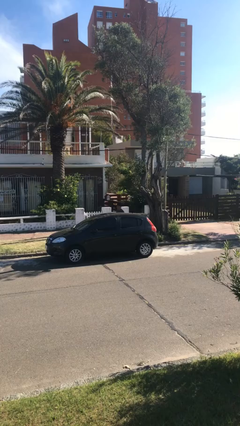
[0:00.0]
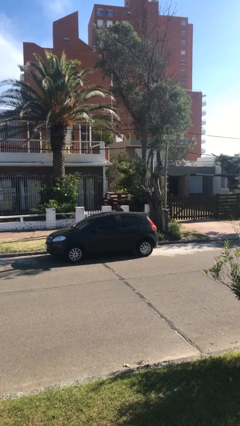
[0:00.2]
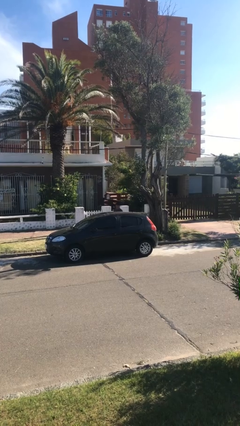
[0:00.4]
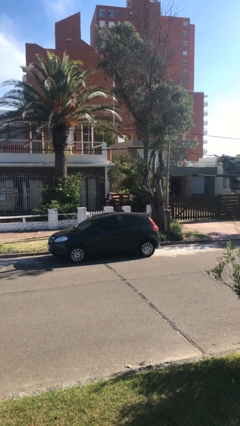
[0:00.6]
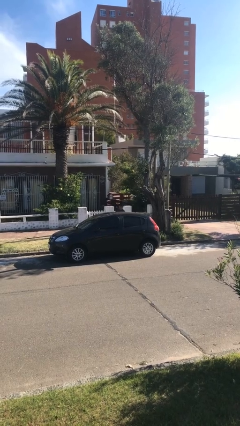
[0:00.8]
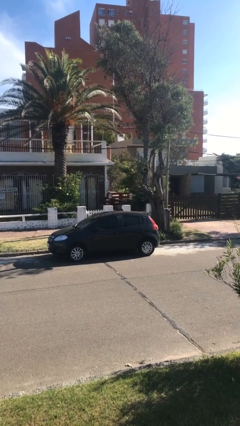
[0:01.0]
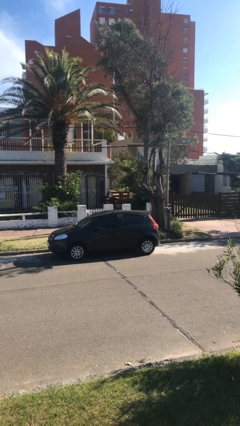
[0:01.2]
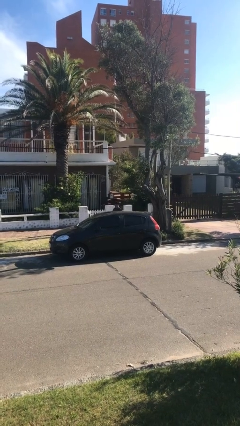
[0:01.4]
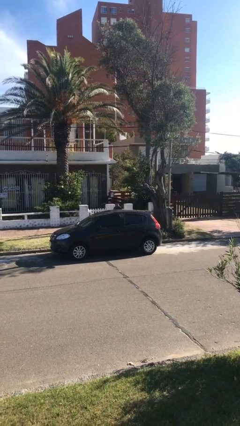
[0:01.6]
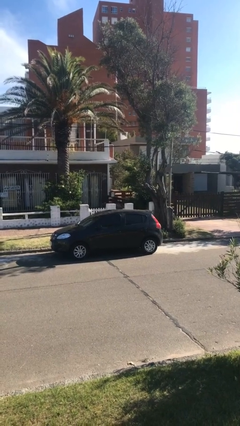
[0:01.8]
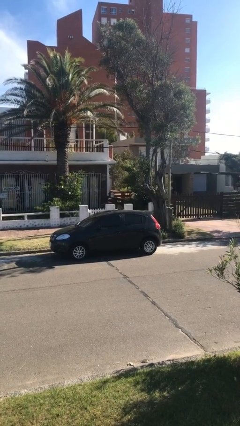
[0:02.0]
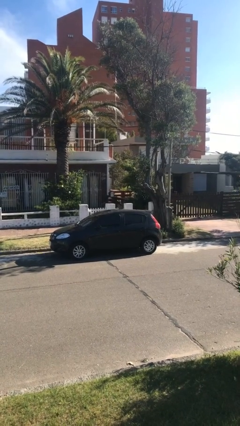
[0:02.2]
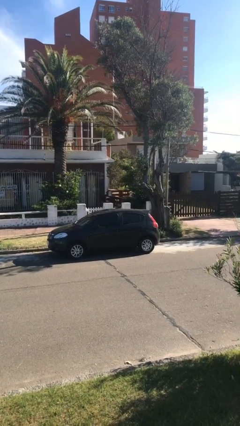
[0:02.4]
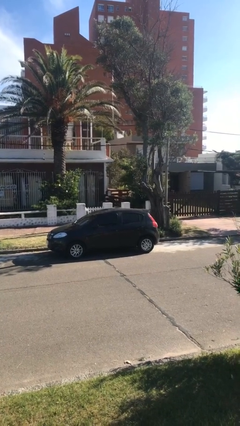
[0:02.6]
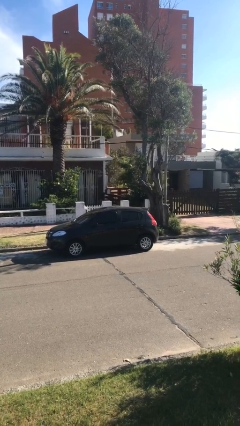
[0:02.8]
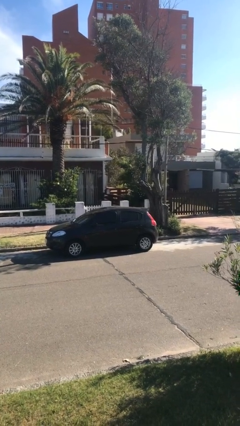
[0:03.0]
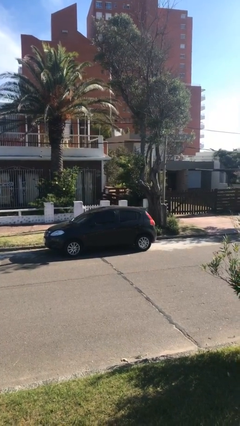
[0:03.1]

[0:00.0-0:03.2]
person enters car

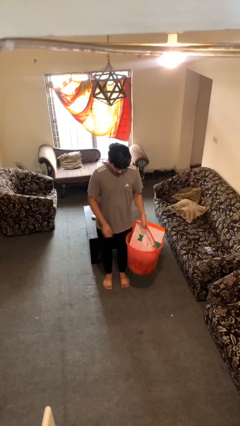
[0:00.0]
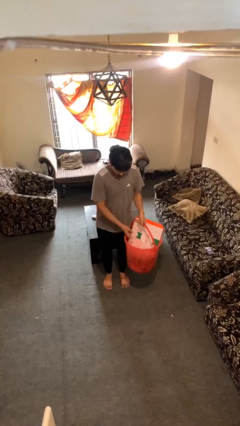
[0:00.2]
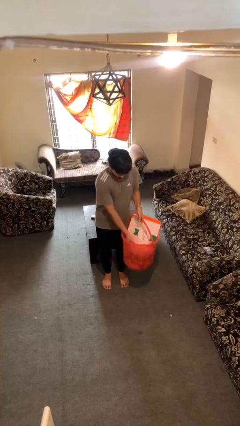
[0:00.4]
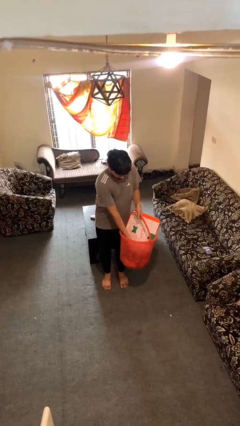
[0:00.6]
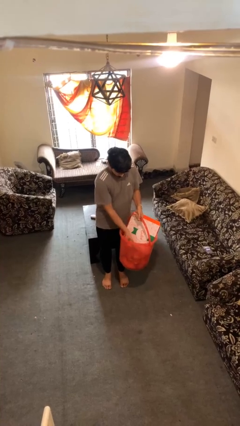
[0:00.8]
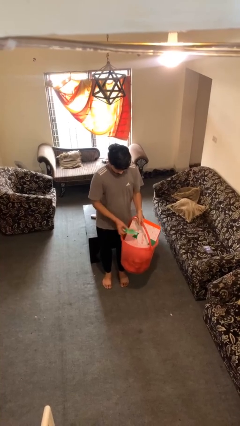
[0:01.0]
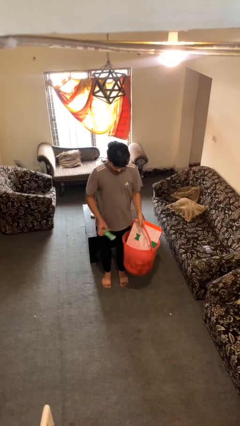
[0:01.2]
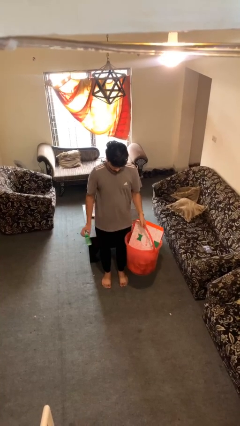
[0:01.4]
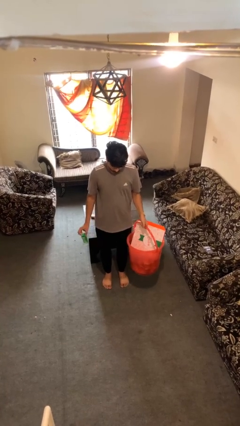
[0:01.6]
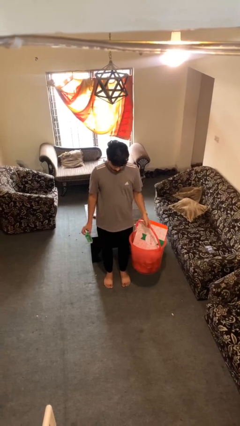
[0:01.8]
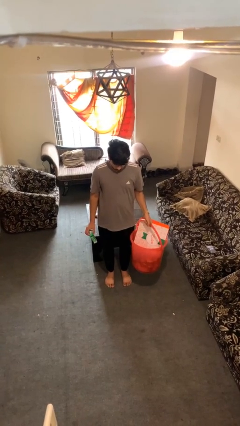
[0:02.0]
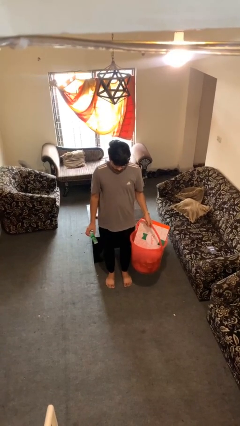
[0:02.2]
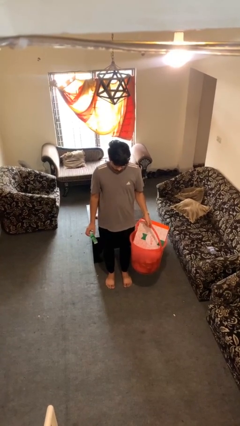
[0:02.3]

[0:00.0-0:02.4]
person takes object from basket

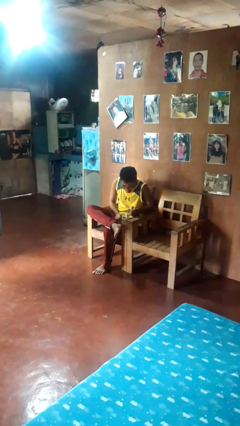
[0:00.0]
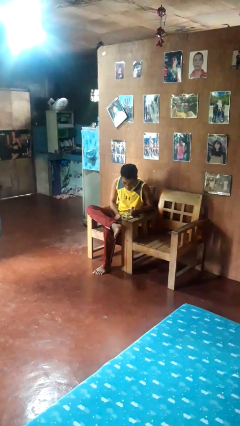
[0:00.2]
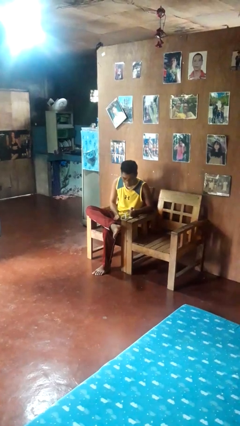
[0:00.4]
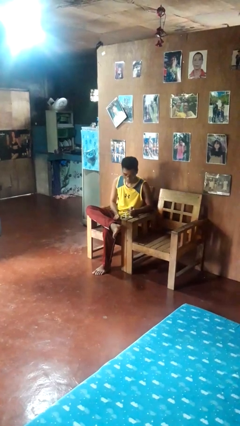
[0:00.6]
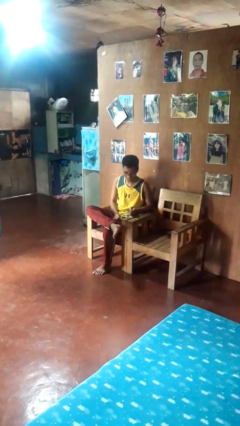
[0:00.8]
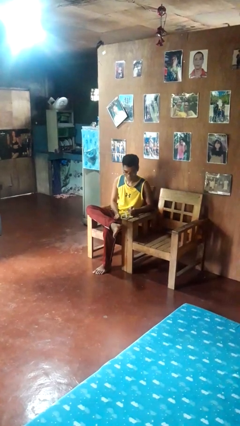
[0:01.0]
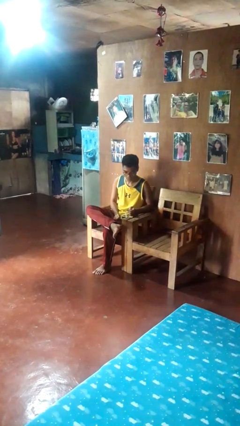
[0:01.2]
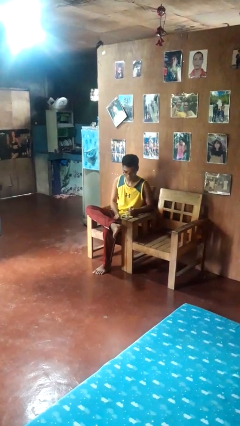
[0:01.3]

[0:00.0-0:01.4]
person extinguishes candle

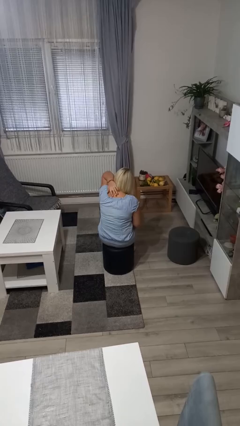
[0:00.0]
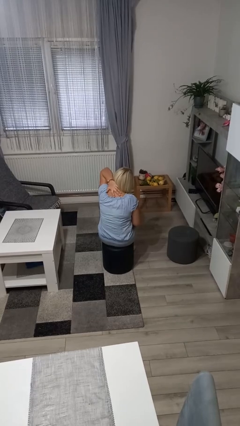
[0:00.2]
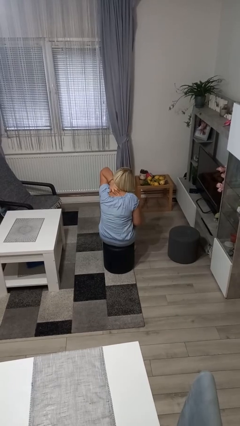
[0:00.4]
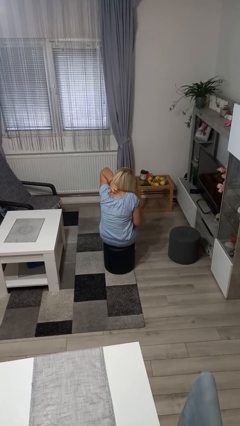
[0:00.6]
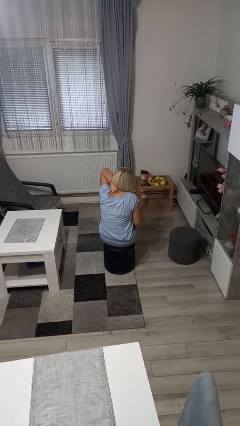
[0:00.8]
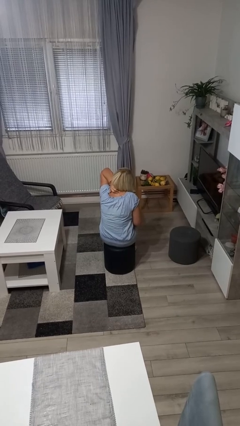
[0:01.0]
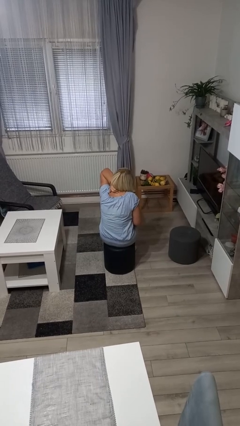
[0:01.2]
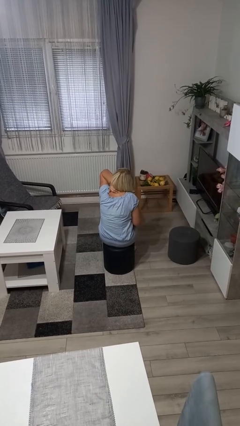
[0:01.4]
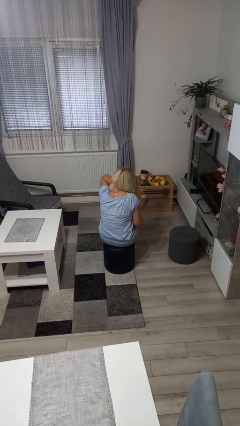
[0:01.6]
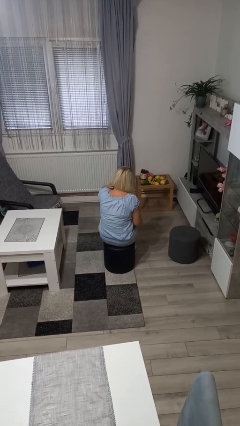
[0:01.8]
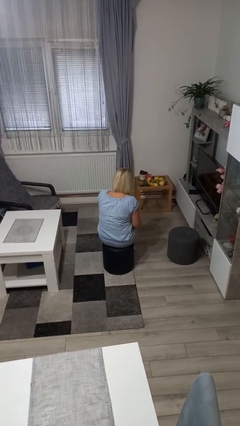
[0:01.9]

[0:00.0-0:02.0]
person rubs neck

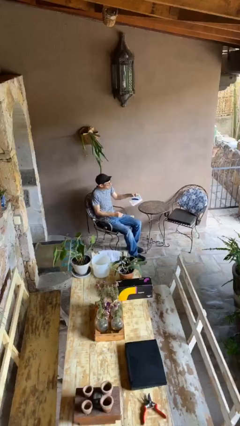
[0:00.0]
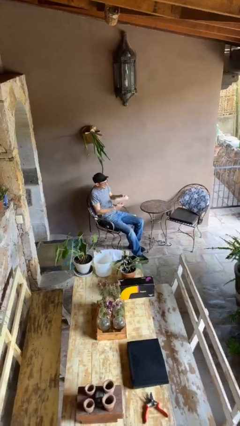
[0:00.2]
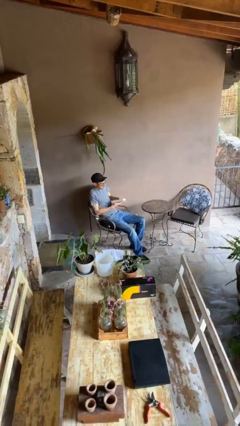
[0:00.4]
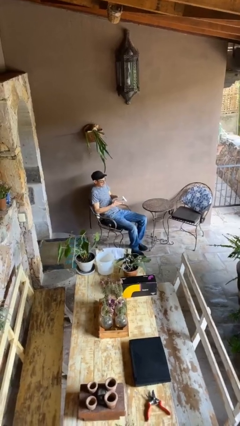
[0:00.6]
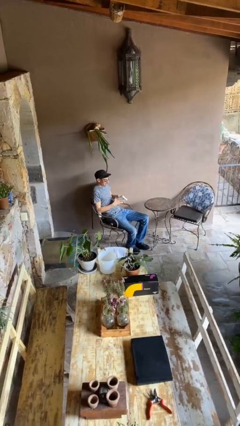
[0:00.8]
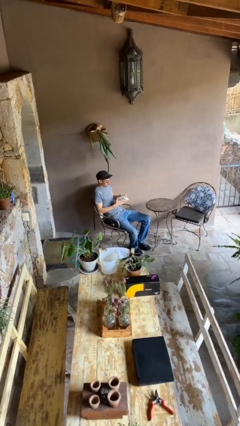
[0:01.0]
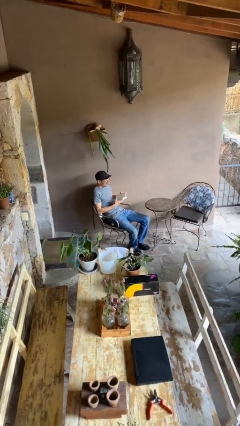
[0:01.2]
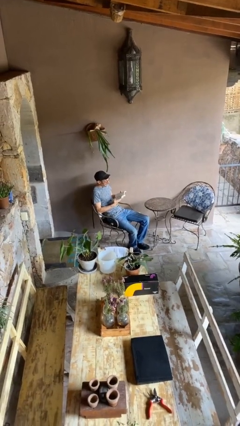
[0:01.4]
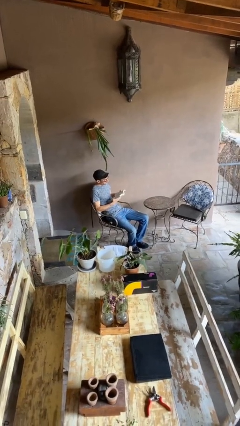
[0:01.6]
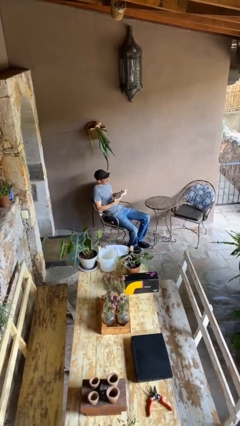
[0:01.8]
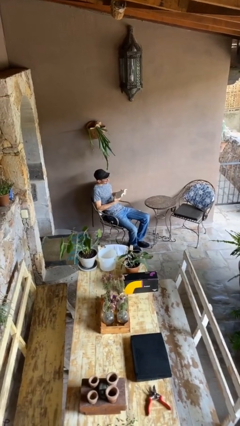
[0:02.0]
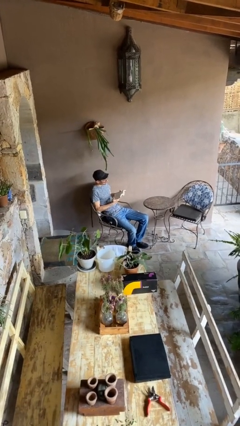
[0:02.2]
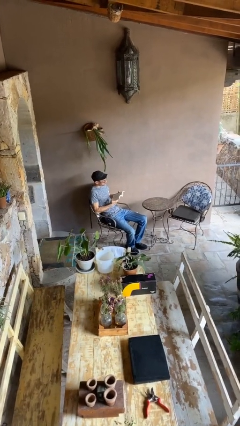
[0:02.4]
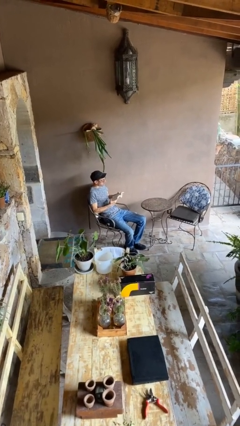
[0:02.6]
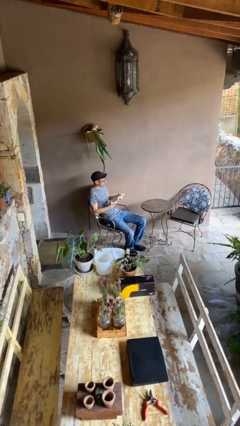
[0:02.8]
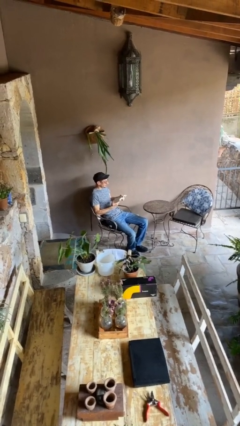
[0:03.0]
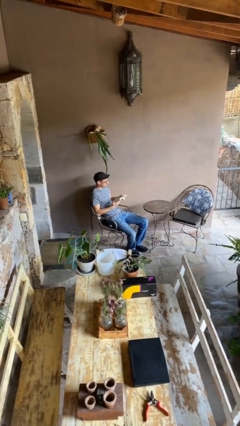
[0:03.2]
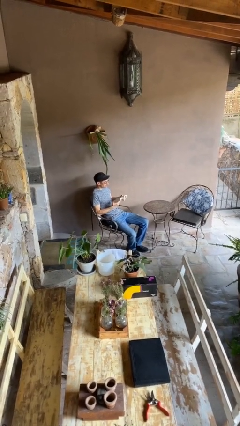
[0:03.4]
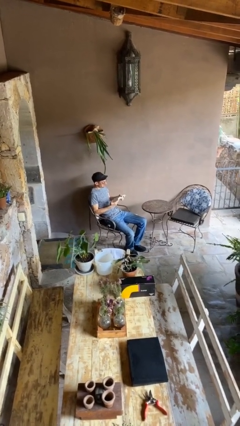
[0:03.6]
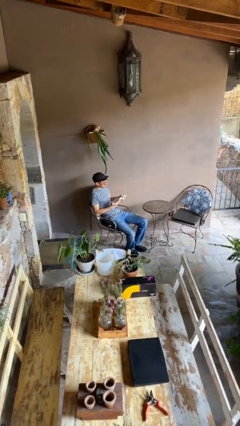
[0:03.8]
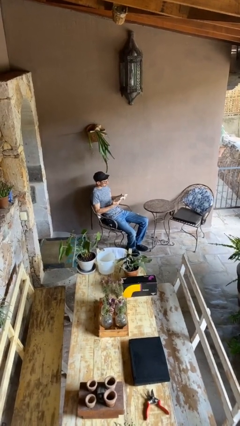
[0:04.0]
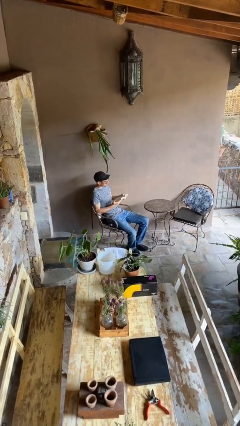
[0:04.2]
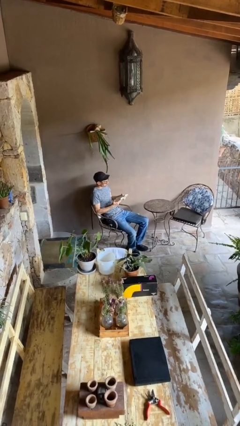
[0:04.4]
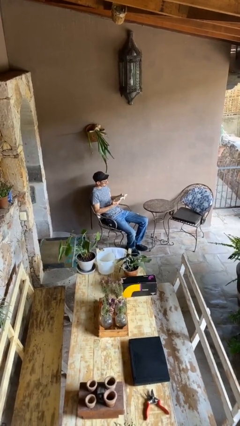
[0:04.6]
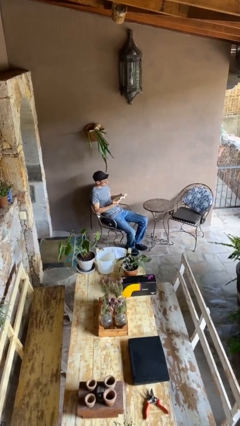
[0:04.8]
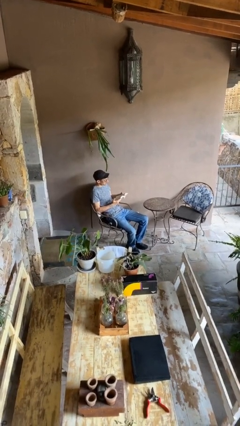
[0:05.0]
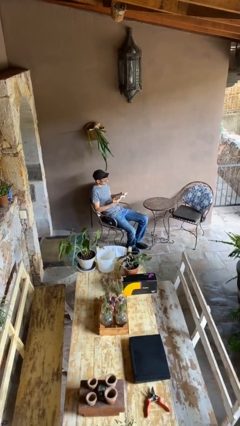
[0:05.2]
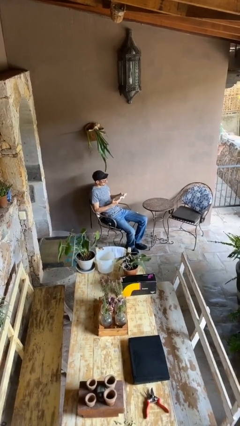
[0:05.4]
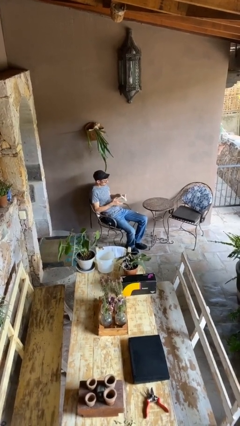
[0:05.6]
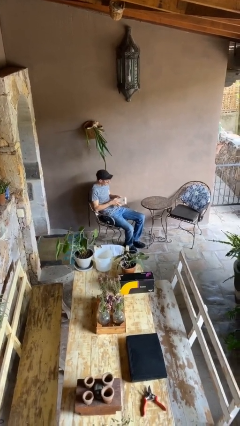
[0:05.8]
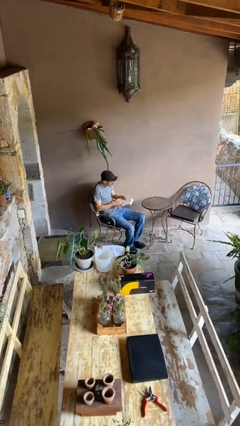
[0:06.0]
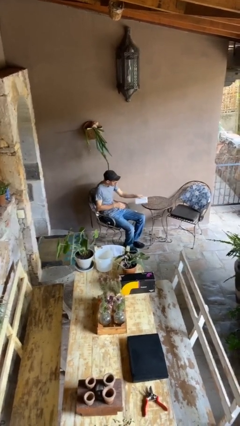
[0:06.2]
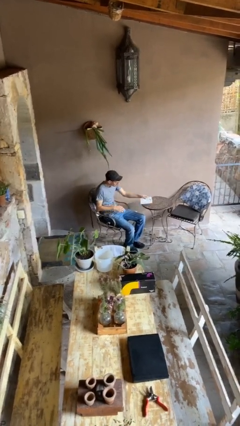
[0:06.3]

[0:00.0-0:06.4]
person reads document

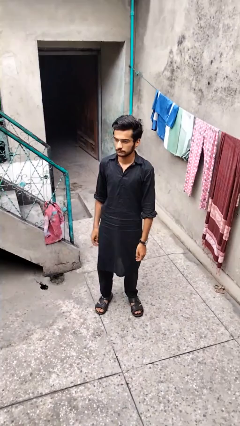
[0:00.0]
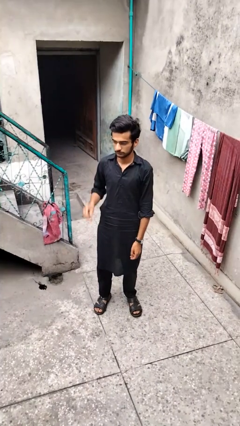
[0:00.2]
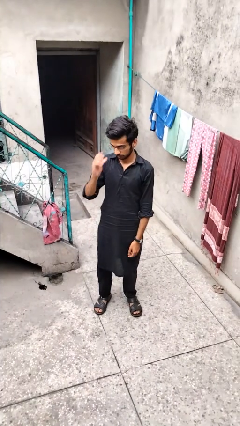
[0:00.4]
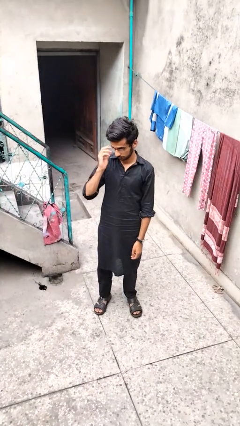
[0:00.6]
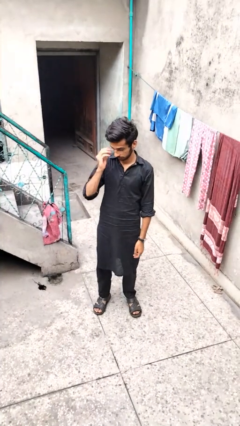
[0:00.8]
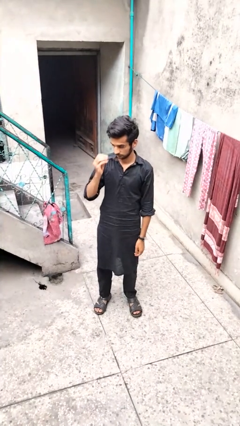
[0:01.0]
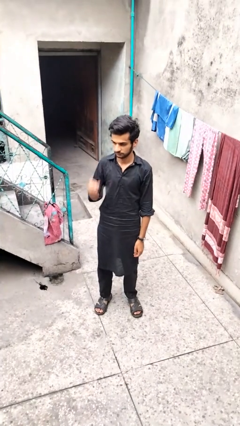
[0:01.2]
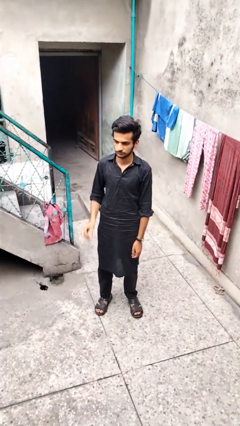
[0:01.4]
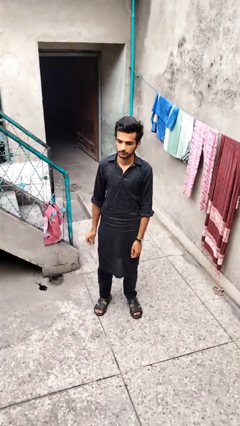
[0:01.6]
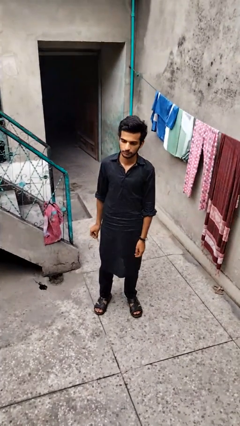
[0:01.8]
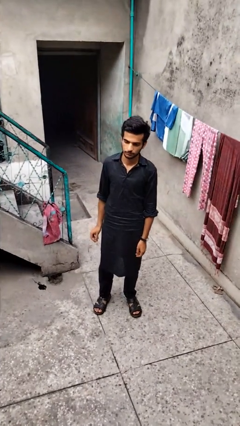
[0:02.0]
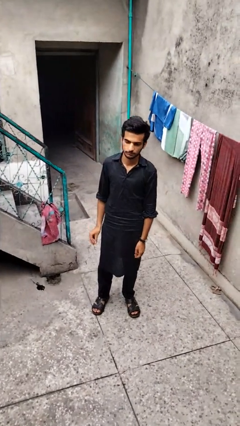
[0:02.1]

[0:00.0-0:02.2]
person takes off glasses
